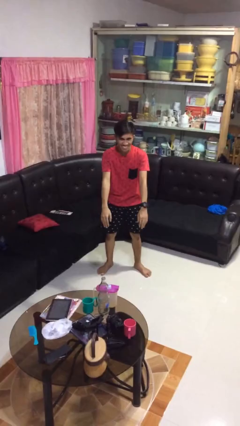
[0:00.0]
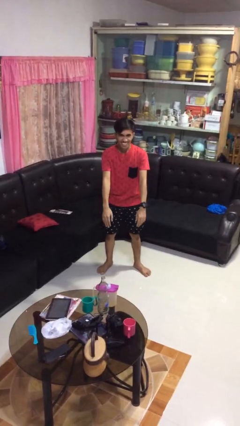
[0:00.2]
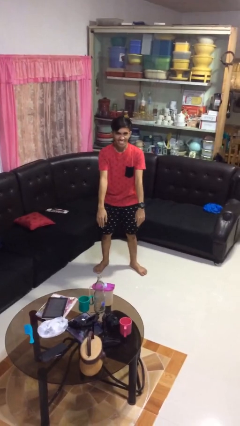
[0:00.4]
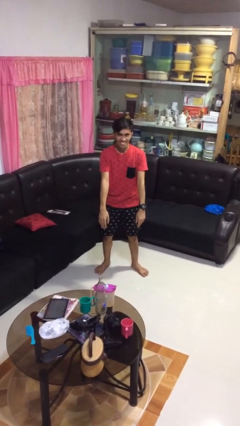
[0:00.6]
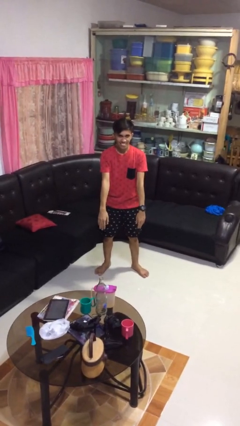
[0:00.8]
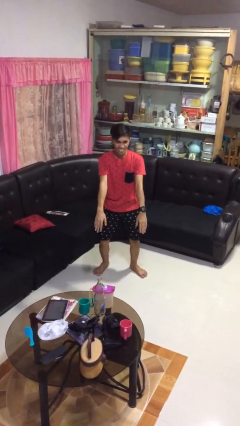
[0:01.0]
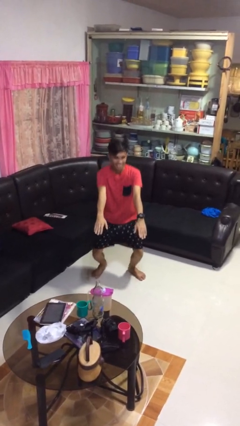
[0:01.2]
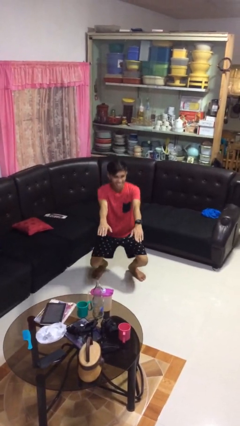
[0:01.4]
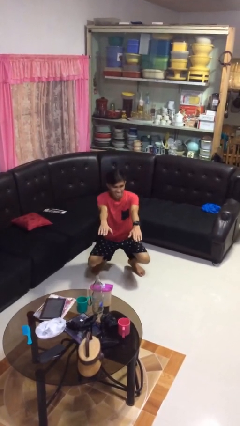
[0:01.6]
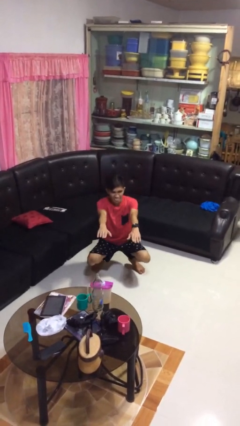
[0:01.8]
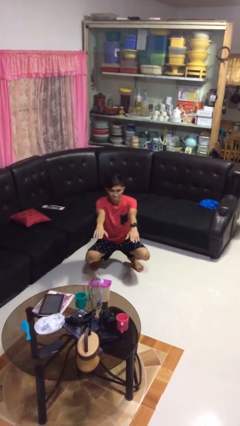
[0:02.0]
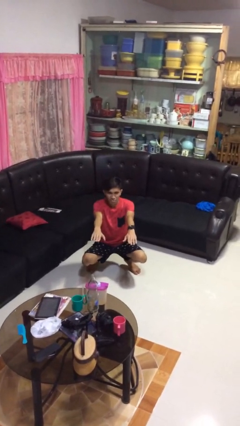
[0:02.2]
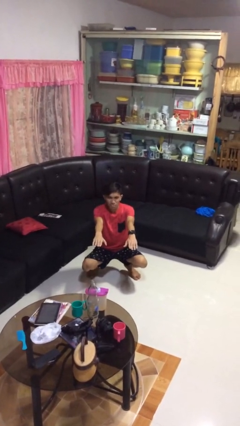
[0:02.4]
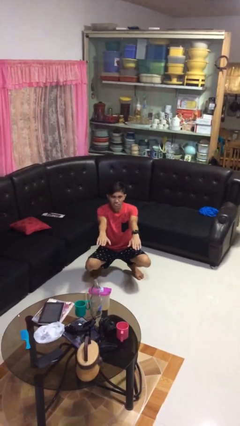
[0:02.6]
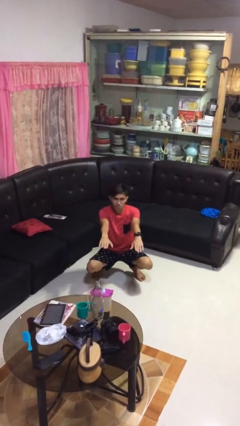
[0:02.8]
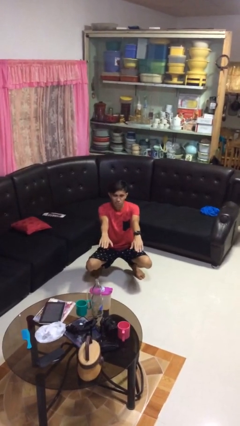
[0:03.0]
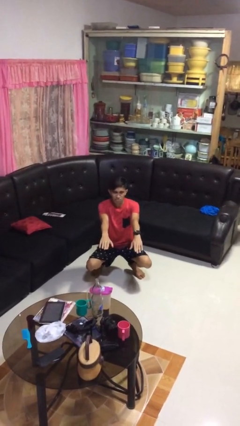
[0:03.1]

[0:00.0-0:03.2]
person squats

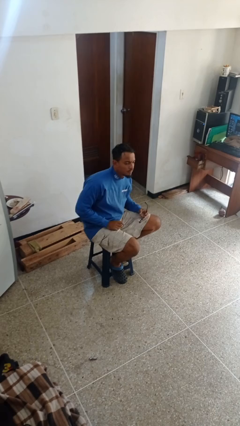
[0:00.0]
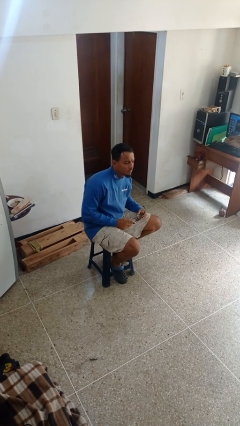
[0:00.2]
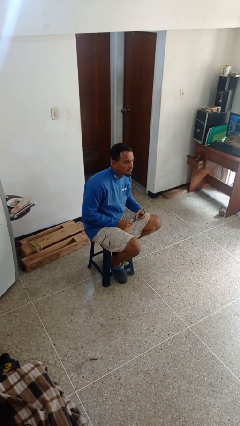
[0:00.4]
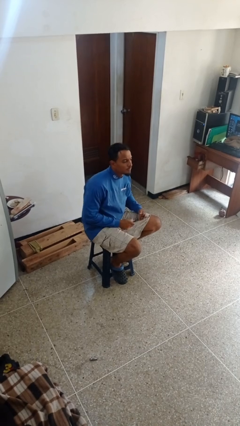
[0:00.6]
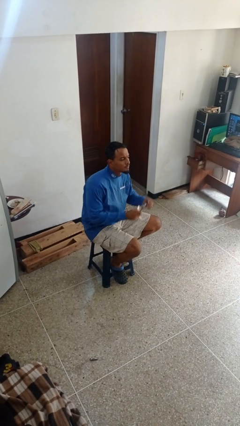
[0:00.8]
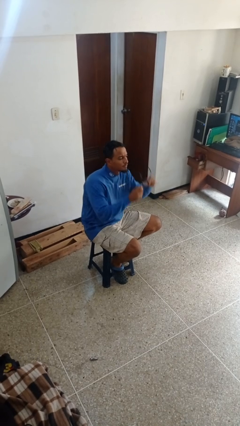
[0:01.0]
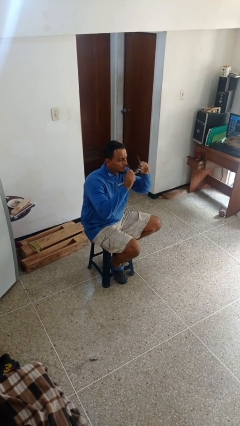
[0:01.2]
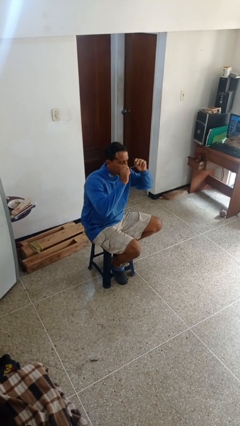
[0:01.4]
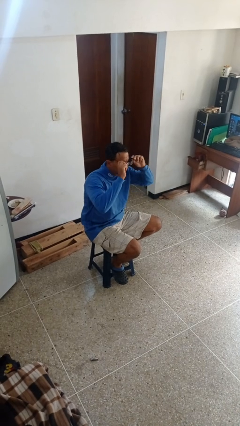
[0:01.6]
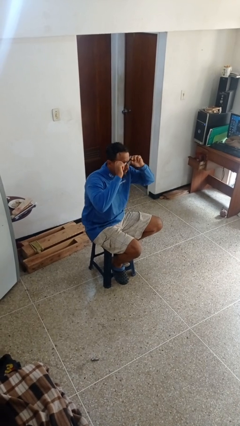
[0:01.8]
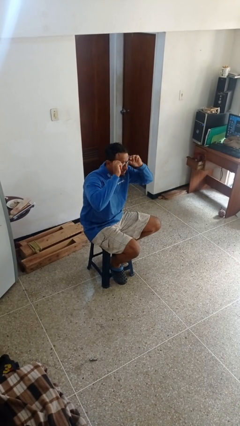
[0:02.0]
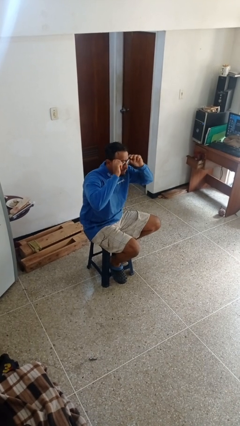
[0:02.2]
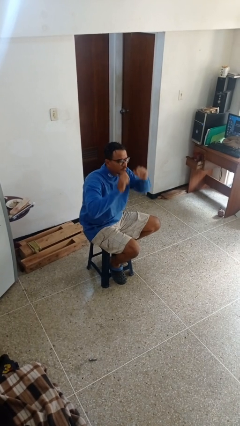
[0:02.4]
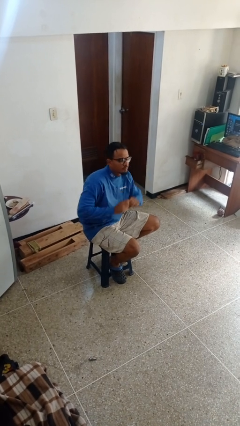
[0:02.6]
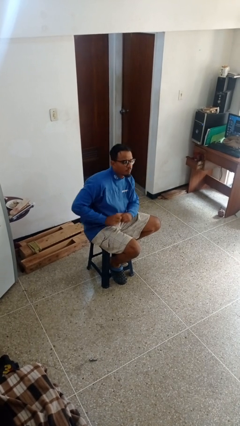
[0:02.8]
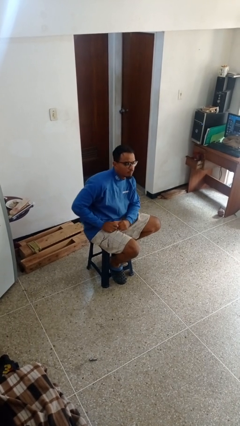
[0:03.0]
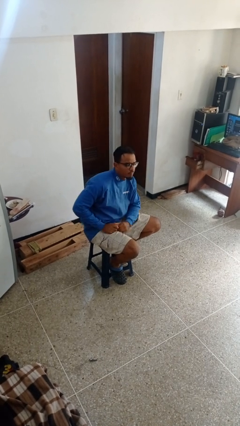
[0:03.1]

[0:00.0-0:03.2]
person puts on glasses

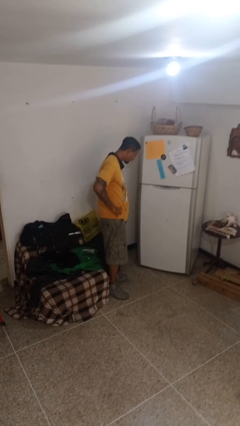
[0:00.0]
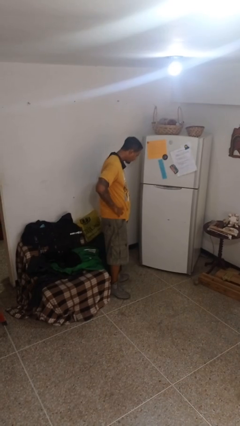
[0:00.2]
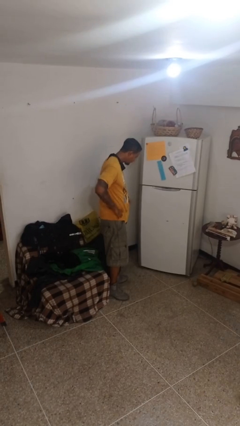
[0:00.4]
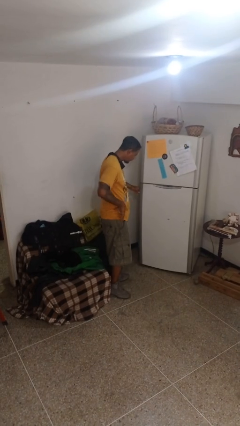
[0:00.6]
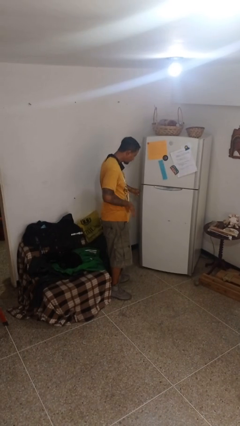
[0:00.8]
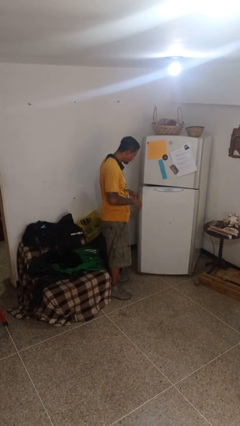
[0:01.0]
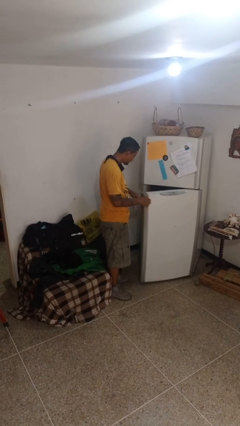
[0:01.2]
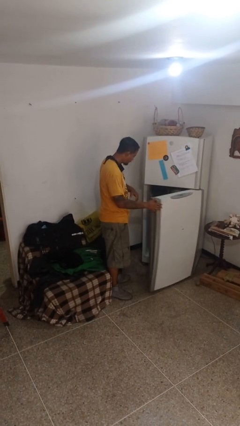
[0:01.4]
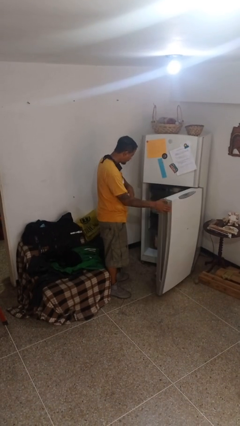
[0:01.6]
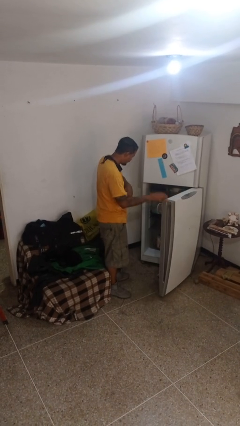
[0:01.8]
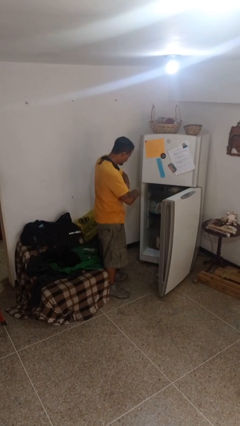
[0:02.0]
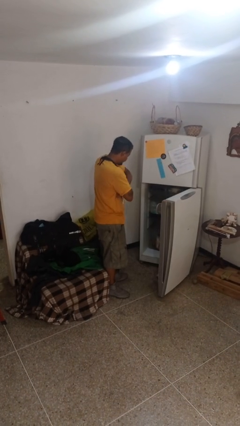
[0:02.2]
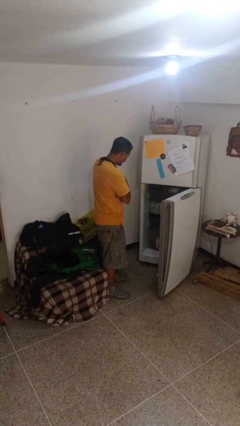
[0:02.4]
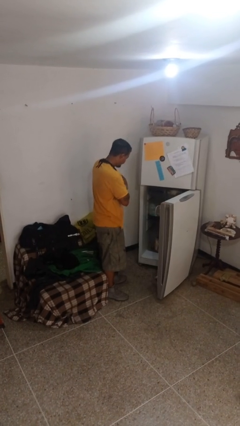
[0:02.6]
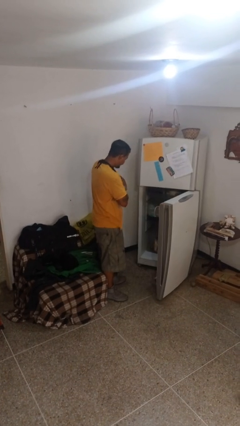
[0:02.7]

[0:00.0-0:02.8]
person opens refrigerator

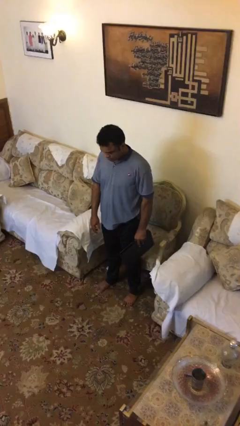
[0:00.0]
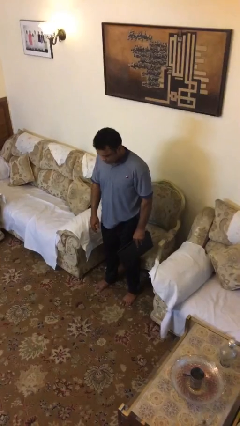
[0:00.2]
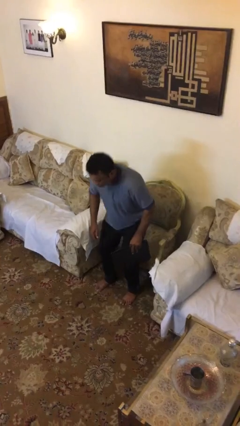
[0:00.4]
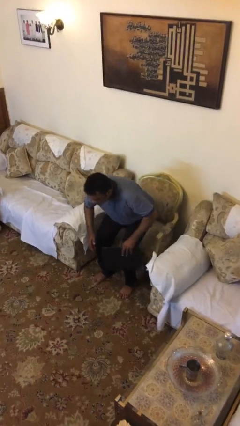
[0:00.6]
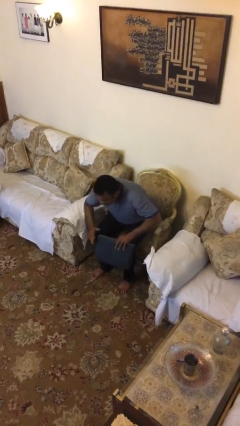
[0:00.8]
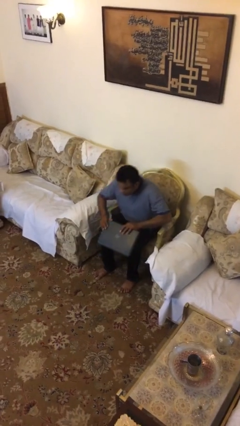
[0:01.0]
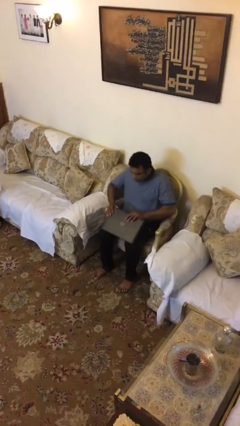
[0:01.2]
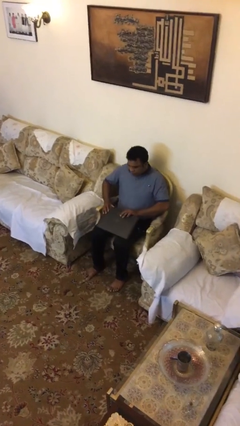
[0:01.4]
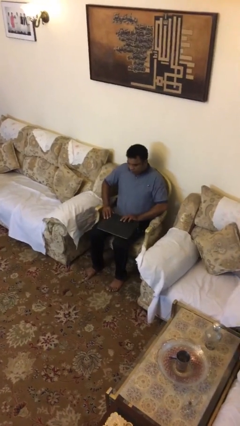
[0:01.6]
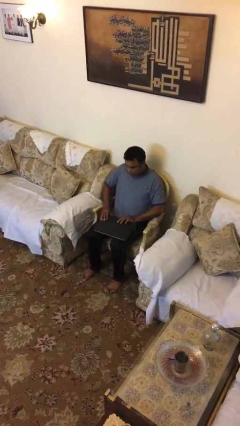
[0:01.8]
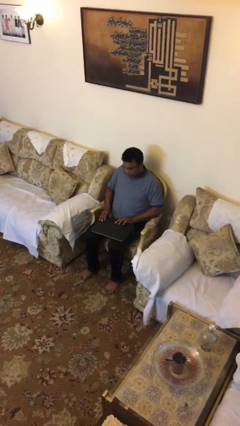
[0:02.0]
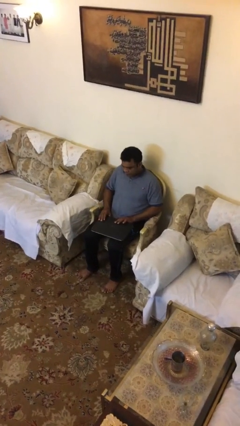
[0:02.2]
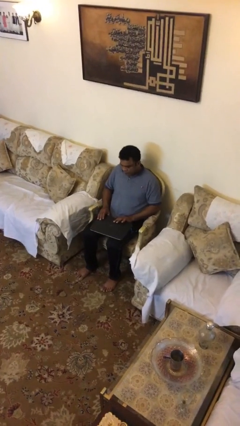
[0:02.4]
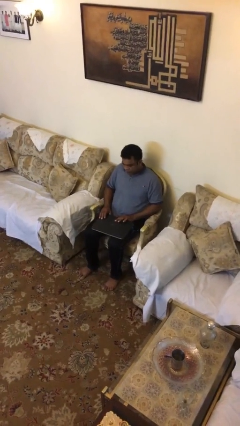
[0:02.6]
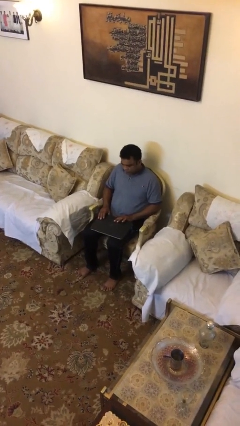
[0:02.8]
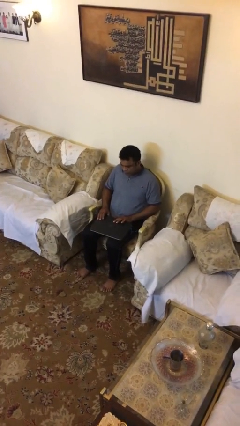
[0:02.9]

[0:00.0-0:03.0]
person sits down

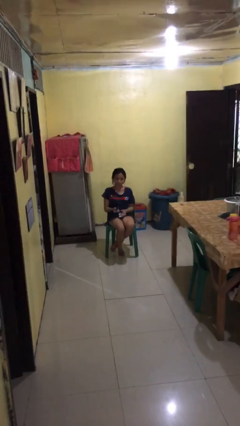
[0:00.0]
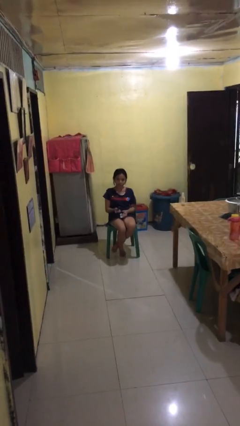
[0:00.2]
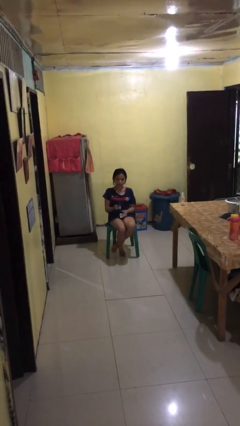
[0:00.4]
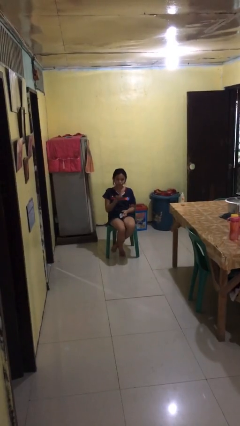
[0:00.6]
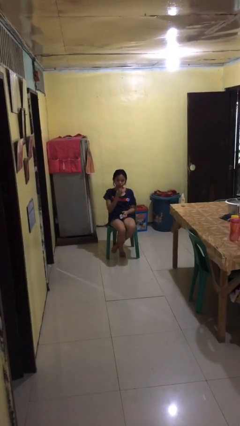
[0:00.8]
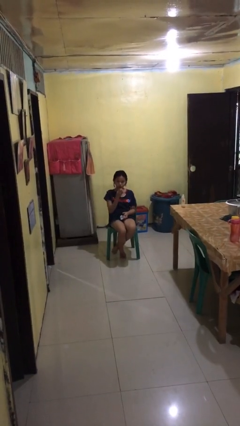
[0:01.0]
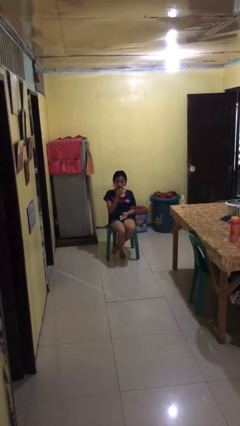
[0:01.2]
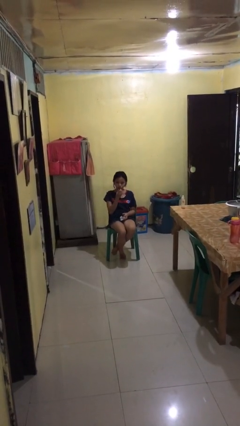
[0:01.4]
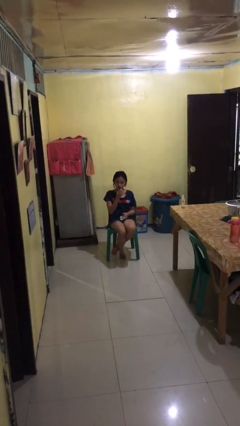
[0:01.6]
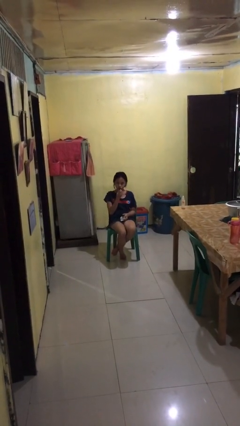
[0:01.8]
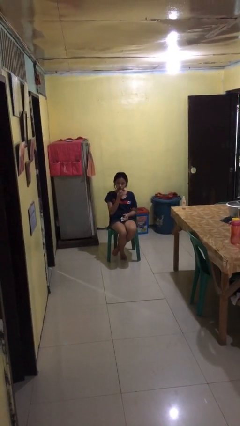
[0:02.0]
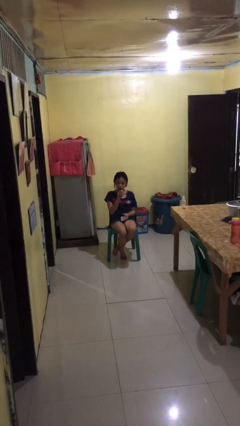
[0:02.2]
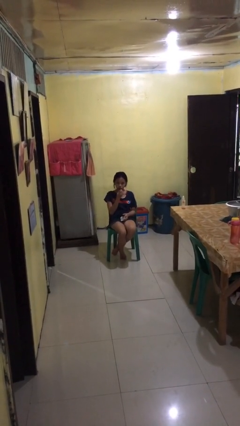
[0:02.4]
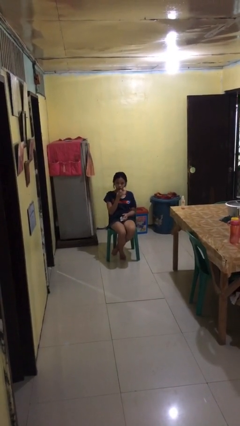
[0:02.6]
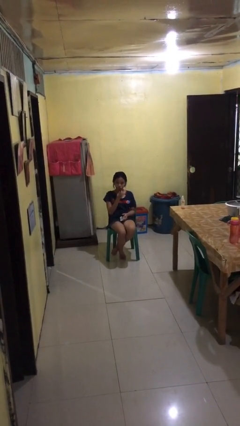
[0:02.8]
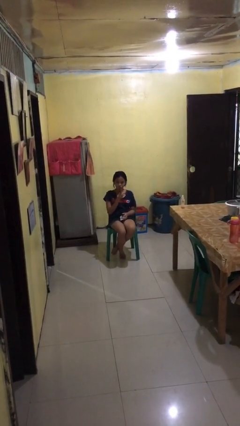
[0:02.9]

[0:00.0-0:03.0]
person applies lip makeup

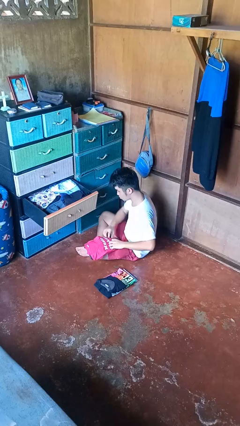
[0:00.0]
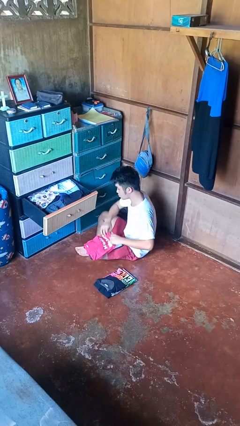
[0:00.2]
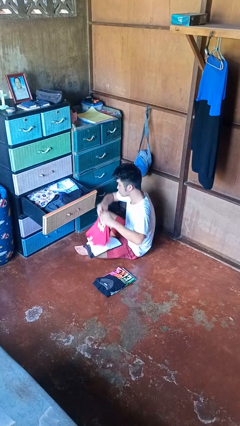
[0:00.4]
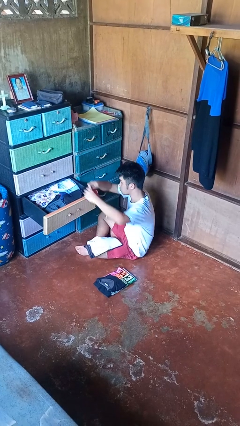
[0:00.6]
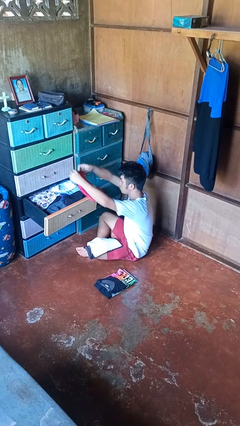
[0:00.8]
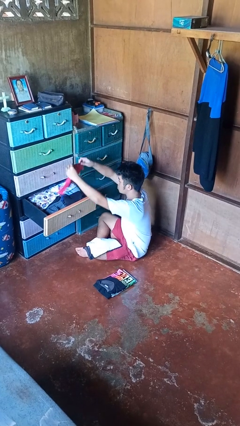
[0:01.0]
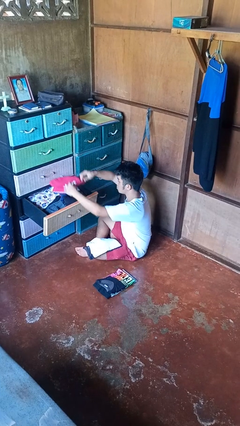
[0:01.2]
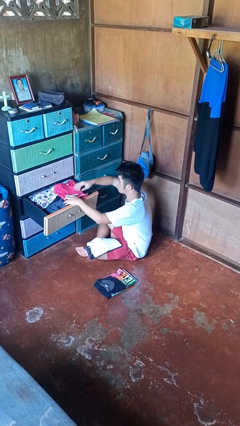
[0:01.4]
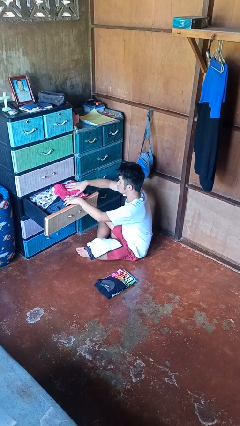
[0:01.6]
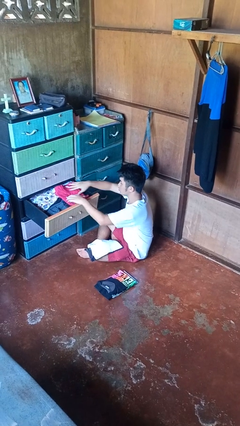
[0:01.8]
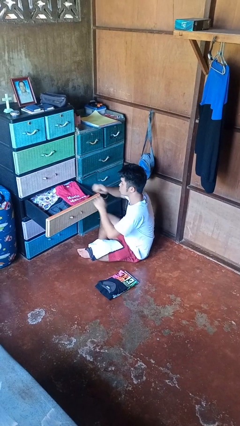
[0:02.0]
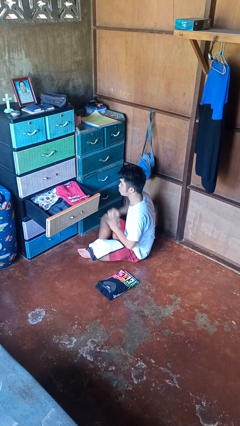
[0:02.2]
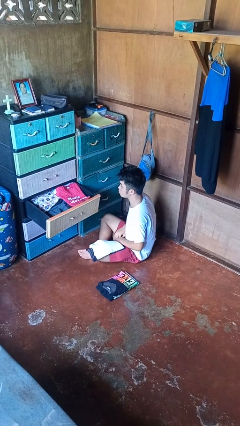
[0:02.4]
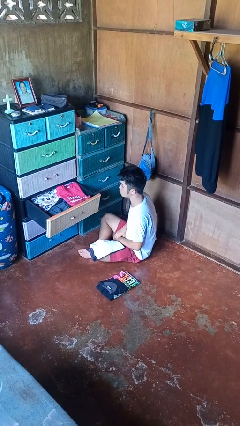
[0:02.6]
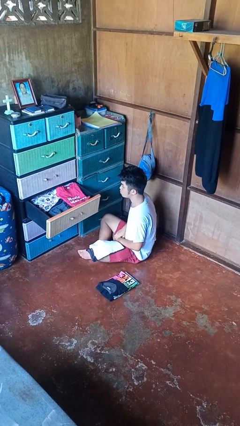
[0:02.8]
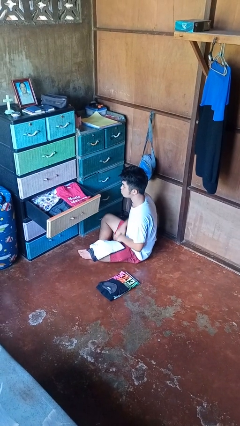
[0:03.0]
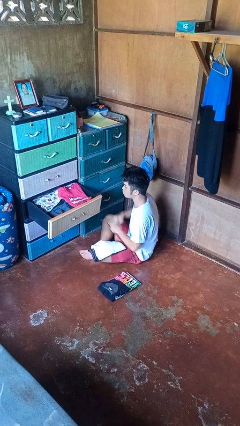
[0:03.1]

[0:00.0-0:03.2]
person puts clothes into dresser
